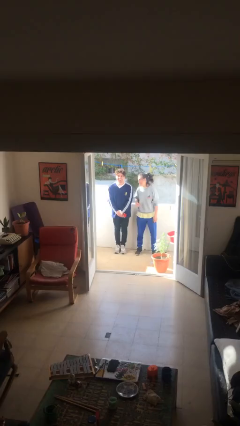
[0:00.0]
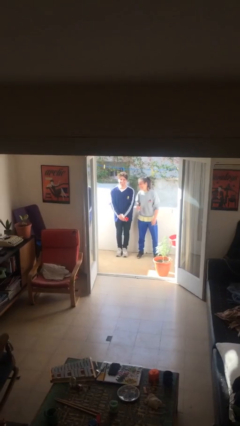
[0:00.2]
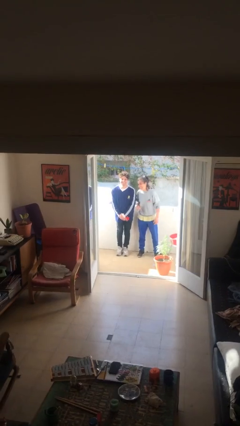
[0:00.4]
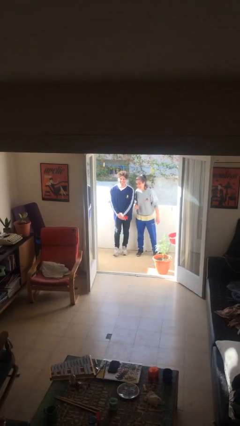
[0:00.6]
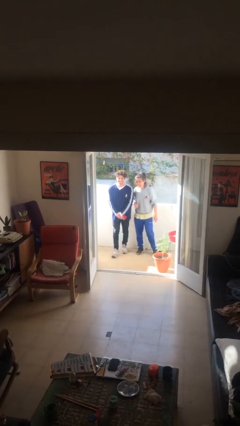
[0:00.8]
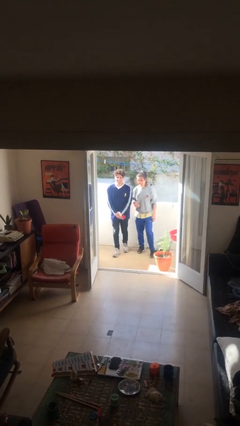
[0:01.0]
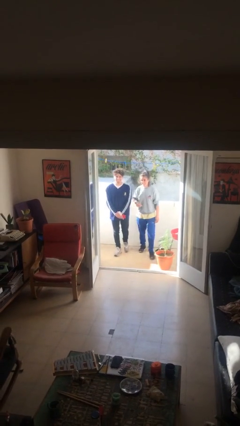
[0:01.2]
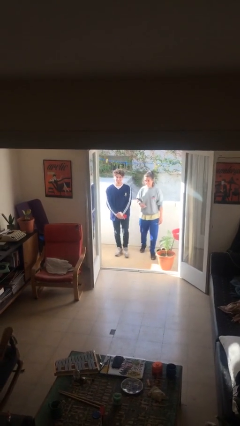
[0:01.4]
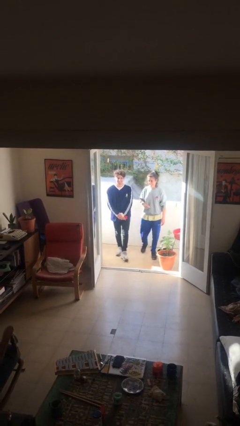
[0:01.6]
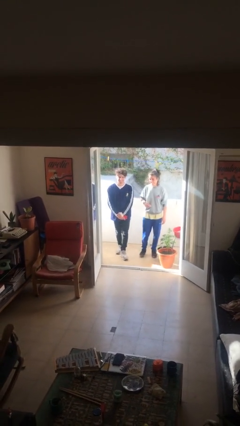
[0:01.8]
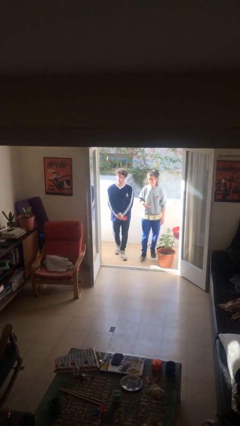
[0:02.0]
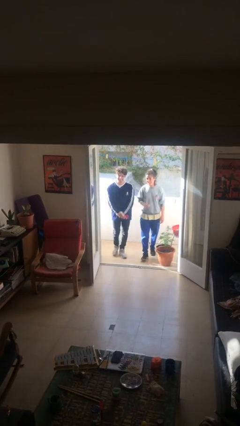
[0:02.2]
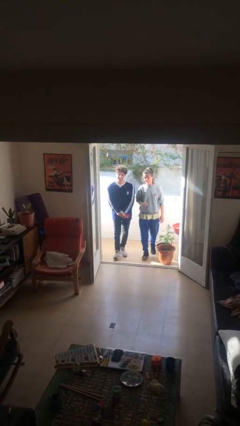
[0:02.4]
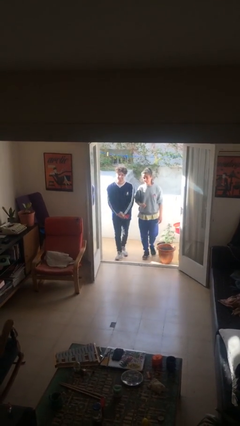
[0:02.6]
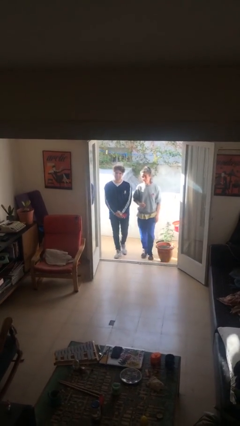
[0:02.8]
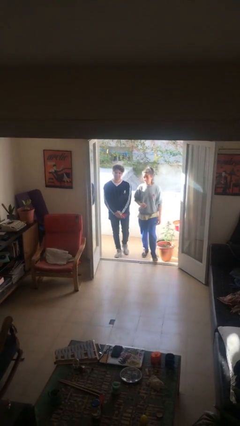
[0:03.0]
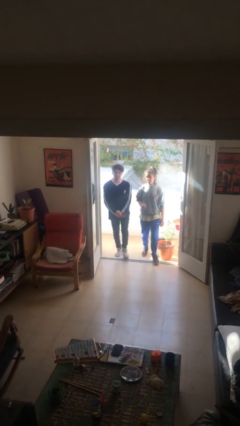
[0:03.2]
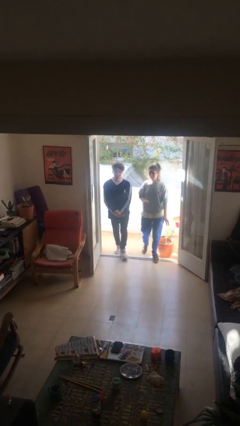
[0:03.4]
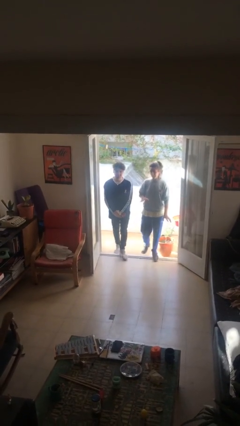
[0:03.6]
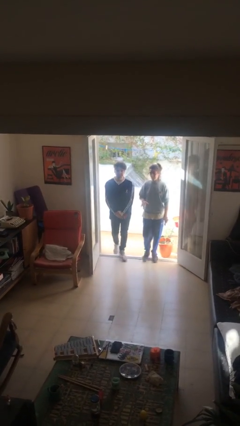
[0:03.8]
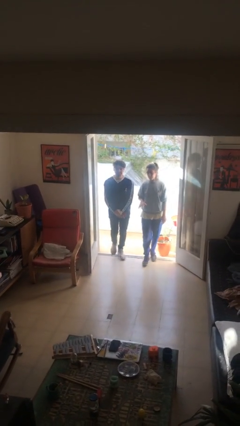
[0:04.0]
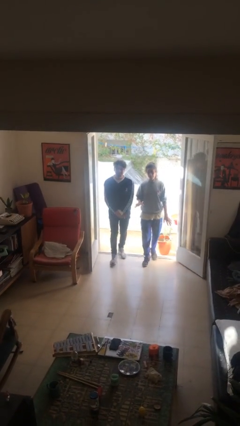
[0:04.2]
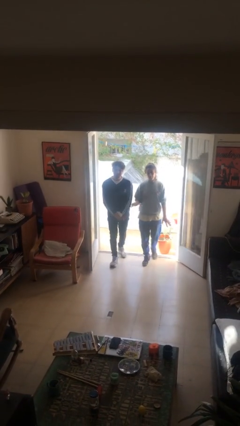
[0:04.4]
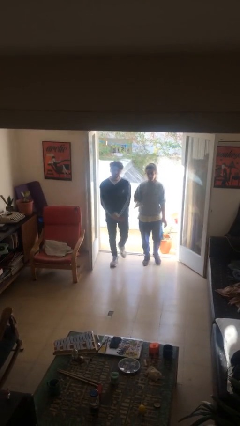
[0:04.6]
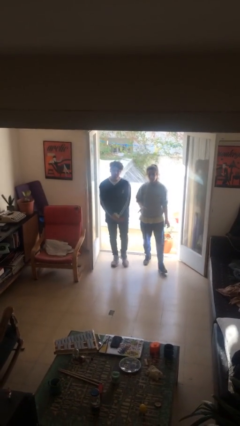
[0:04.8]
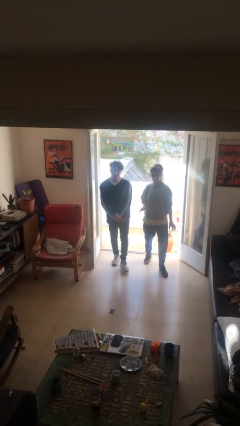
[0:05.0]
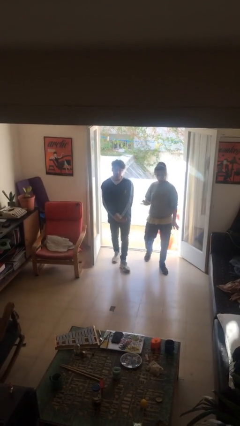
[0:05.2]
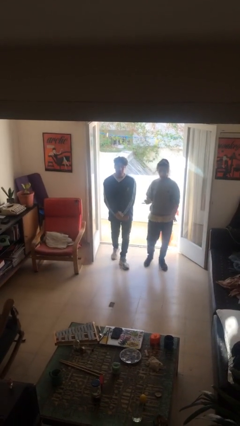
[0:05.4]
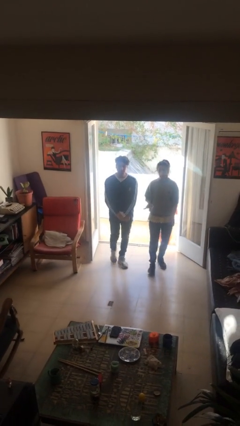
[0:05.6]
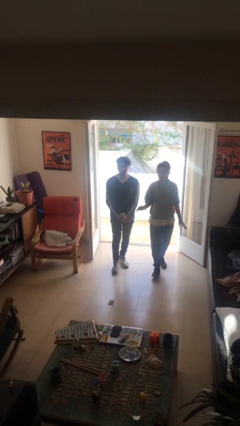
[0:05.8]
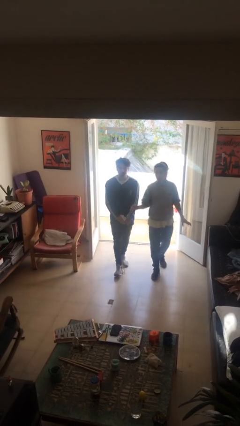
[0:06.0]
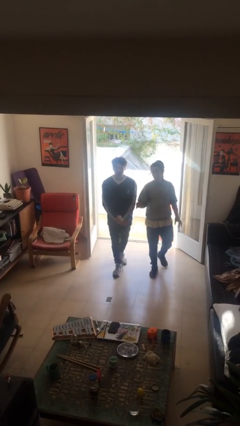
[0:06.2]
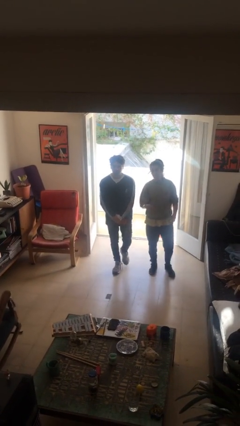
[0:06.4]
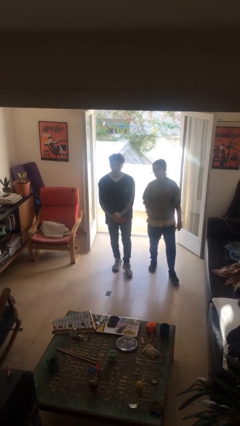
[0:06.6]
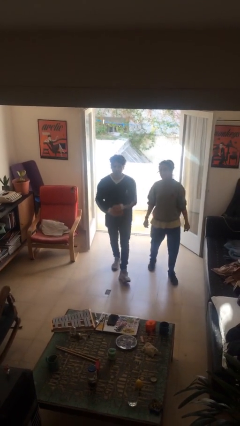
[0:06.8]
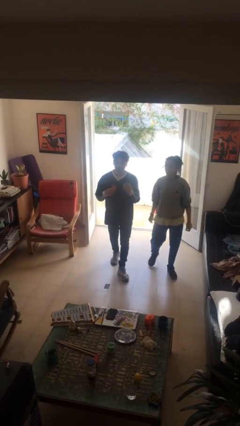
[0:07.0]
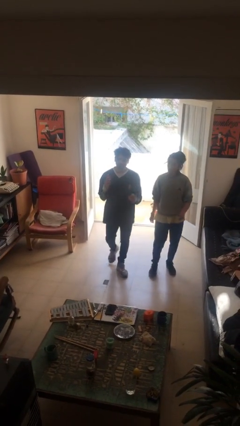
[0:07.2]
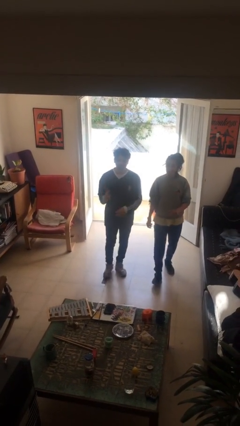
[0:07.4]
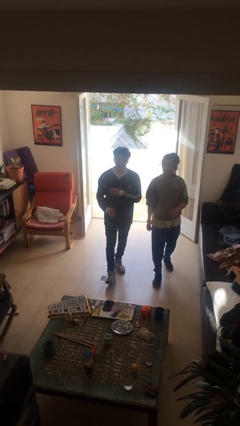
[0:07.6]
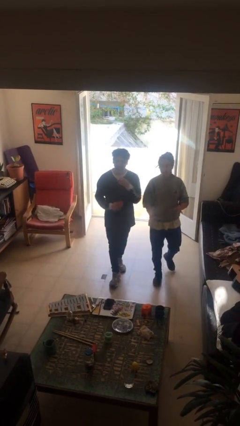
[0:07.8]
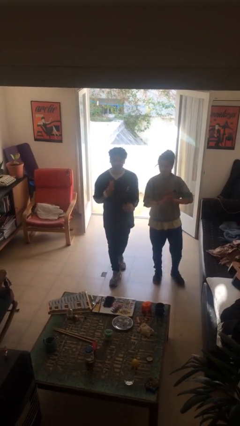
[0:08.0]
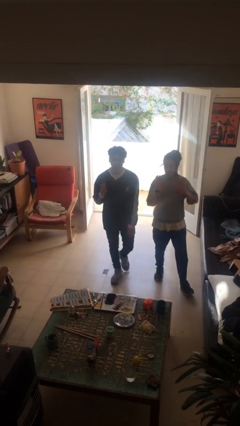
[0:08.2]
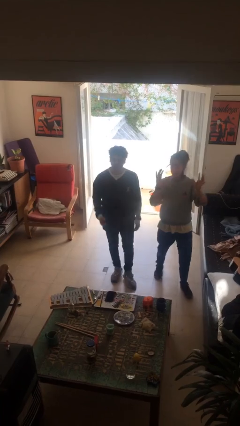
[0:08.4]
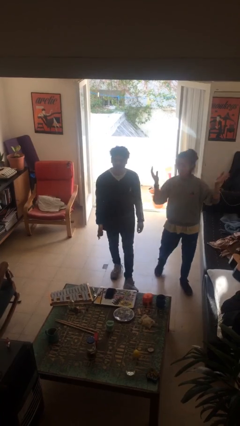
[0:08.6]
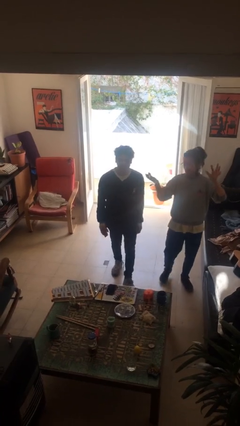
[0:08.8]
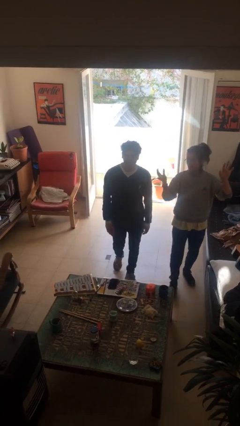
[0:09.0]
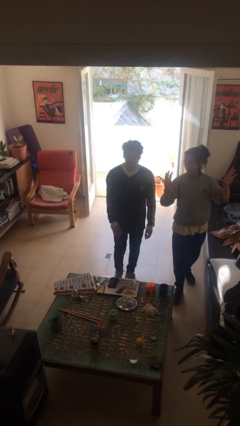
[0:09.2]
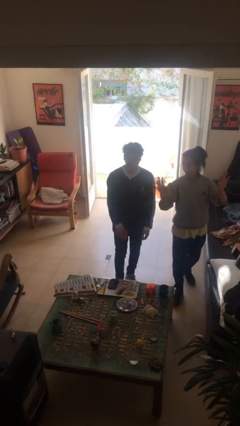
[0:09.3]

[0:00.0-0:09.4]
person talks to person

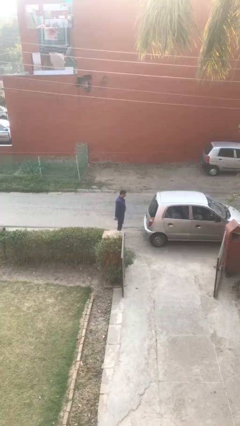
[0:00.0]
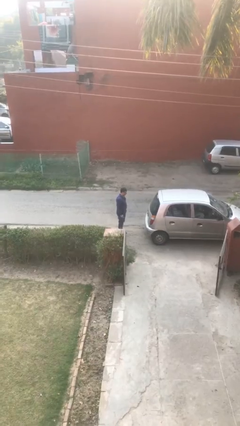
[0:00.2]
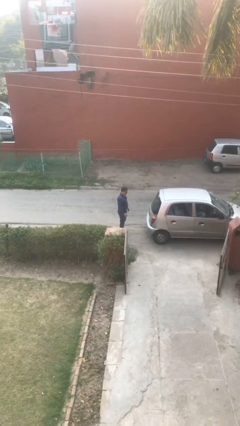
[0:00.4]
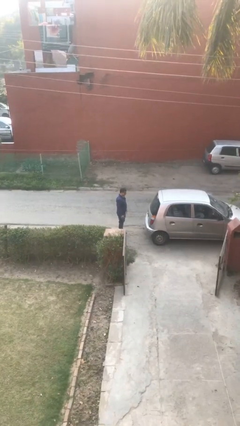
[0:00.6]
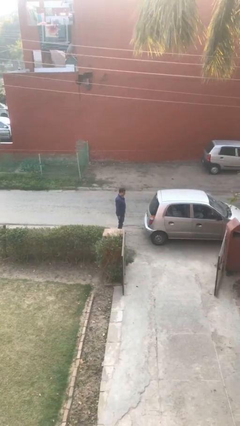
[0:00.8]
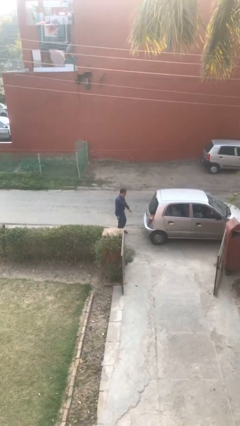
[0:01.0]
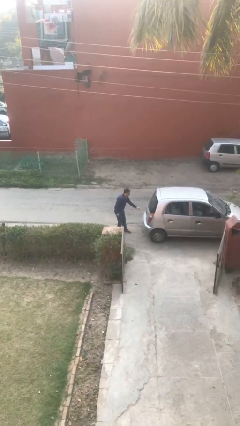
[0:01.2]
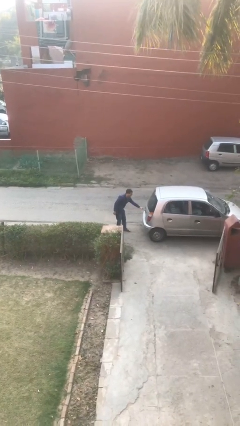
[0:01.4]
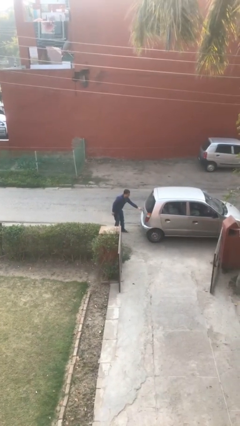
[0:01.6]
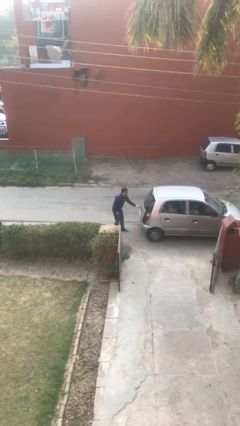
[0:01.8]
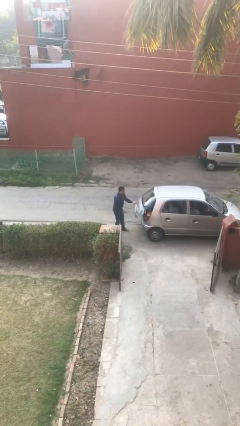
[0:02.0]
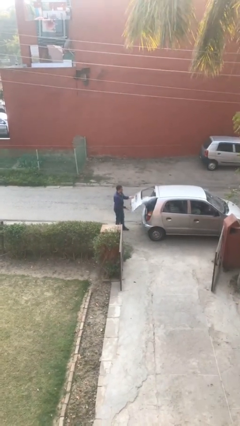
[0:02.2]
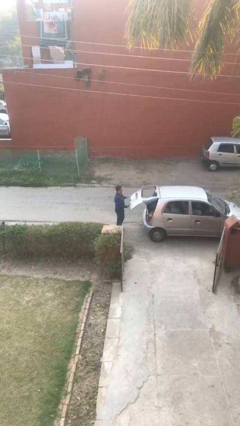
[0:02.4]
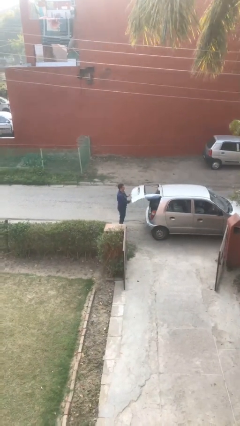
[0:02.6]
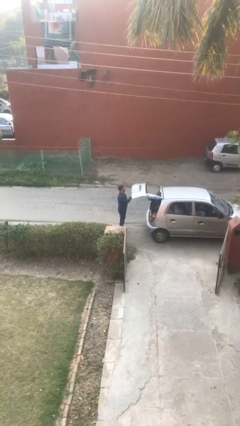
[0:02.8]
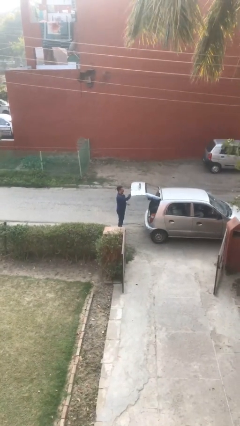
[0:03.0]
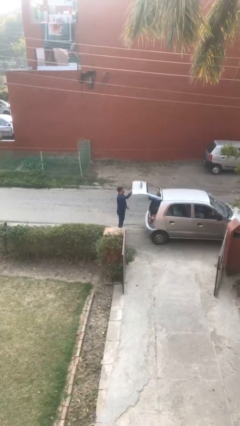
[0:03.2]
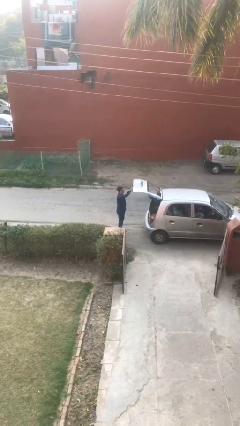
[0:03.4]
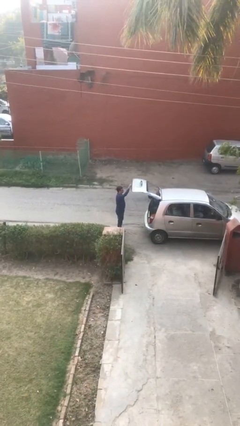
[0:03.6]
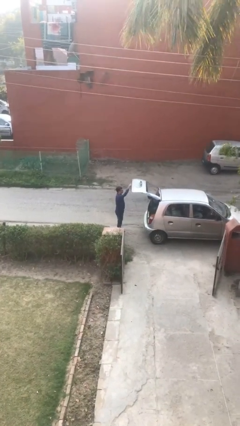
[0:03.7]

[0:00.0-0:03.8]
person opens car trunk

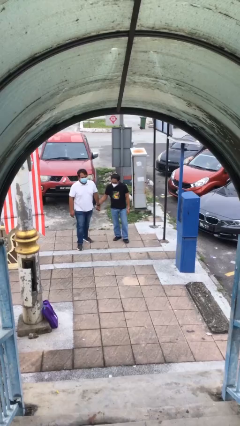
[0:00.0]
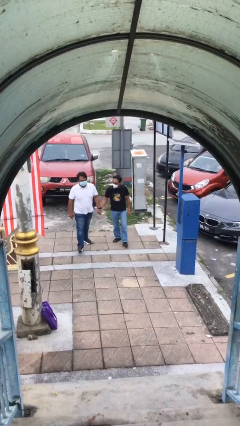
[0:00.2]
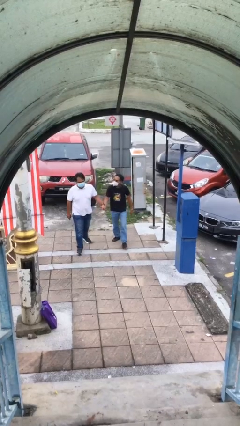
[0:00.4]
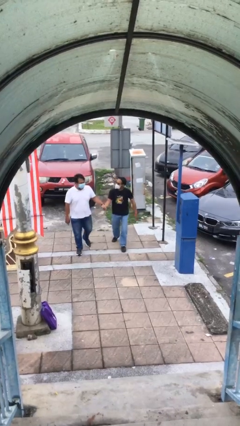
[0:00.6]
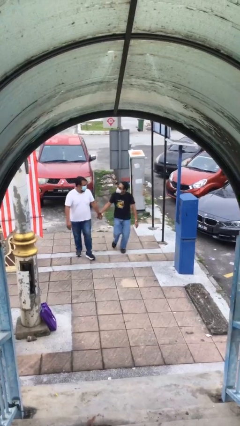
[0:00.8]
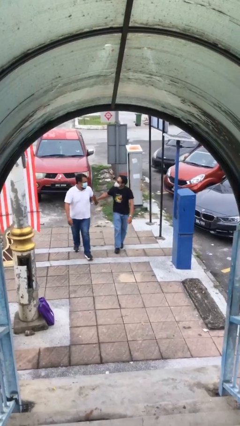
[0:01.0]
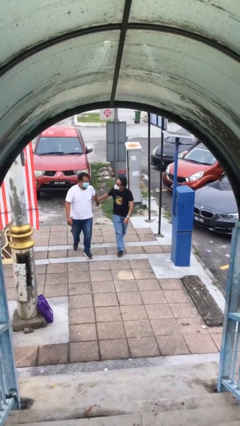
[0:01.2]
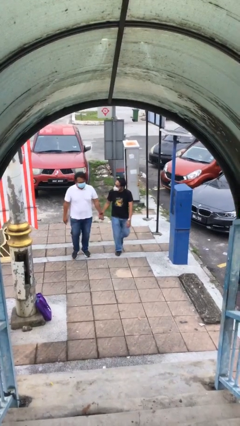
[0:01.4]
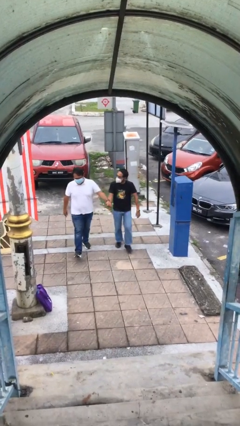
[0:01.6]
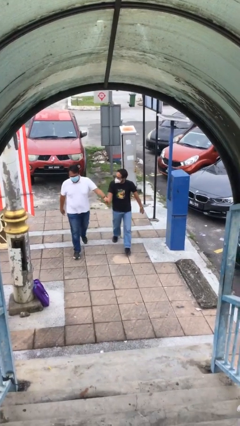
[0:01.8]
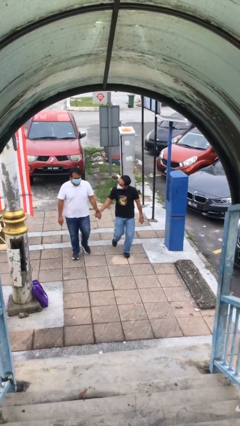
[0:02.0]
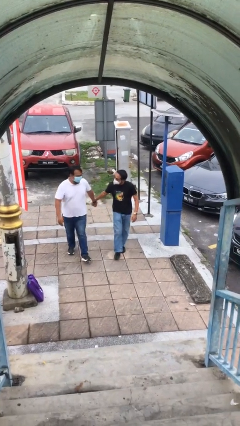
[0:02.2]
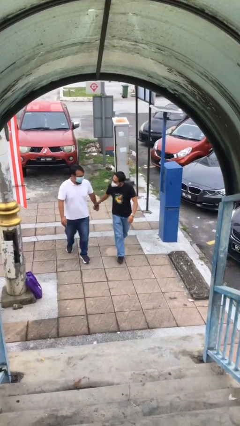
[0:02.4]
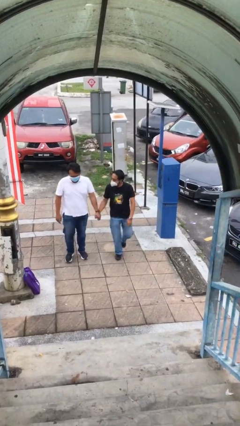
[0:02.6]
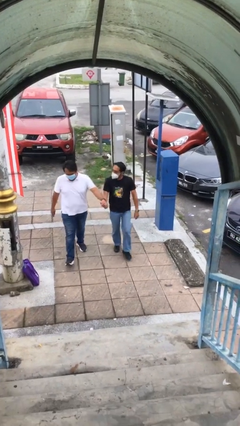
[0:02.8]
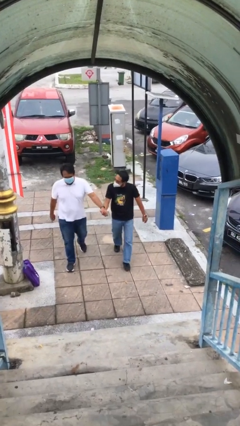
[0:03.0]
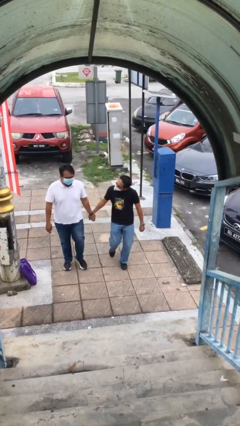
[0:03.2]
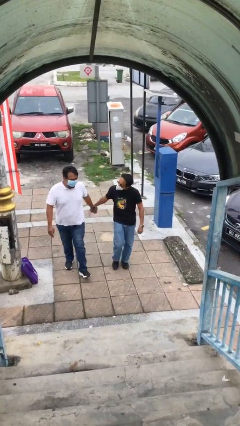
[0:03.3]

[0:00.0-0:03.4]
person holds hand

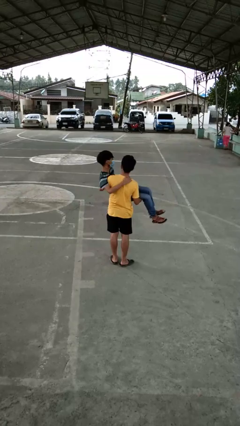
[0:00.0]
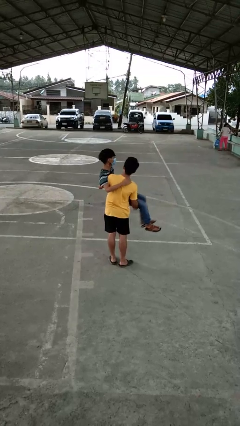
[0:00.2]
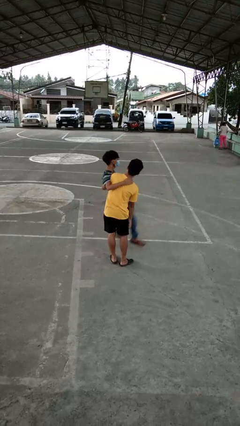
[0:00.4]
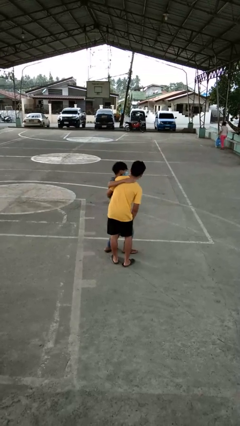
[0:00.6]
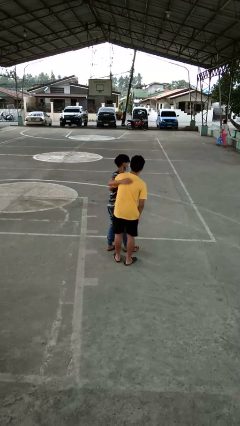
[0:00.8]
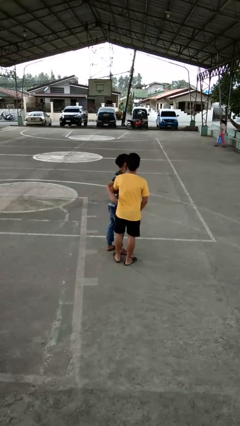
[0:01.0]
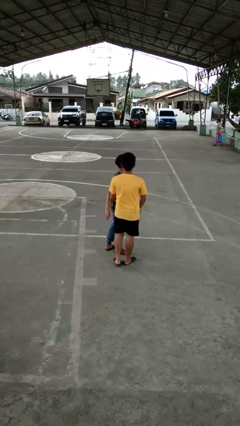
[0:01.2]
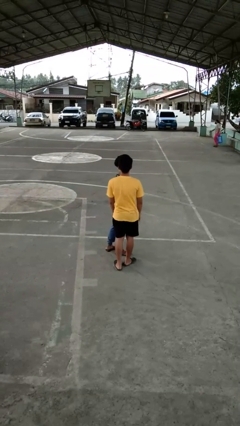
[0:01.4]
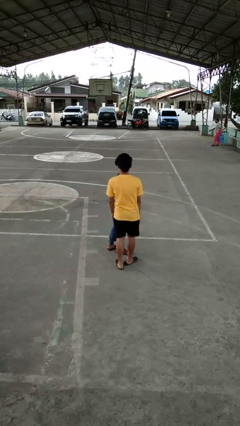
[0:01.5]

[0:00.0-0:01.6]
person puts down person
